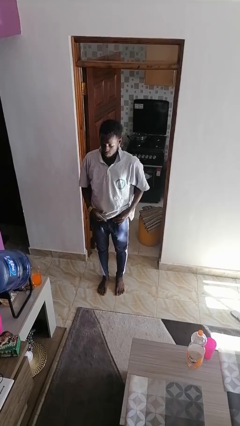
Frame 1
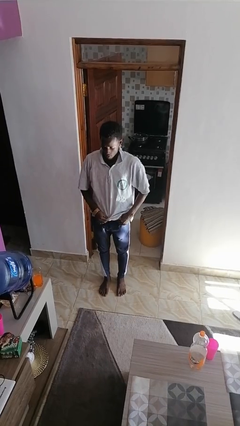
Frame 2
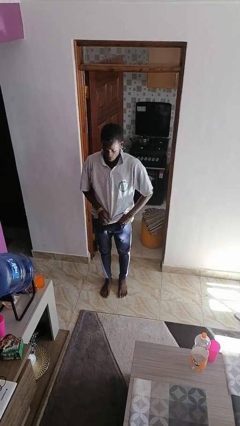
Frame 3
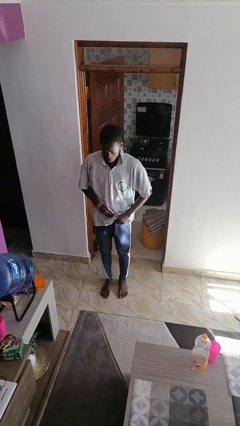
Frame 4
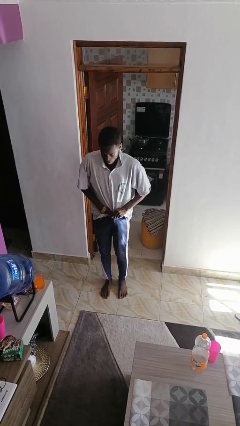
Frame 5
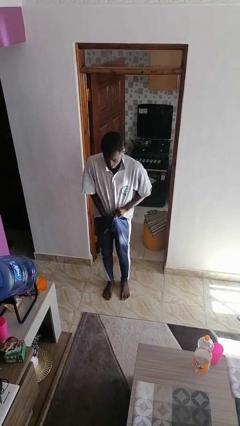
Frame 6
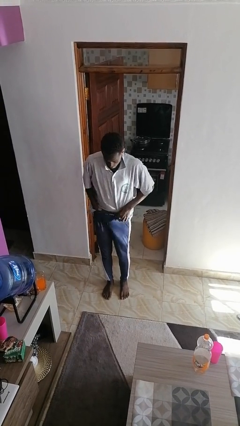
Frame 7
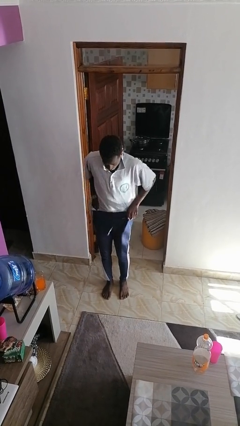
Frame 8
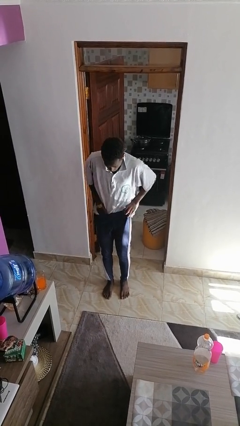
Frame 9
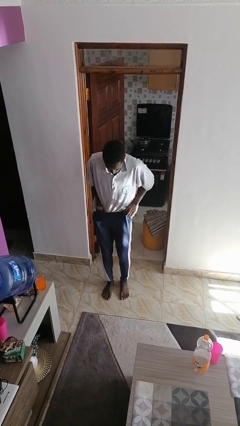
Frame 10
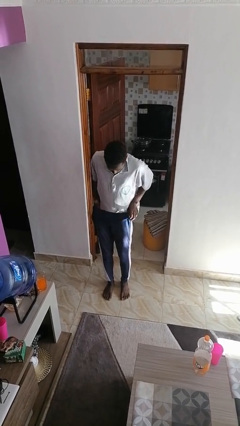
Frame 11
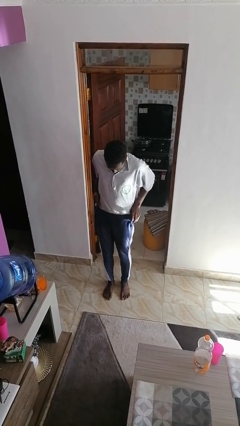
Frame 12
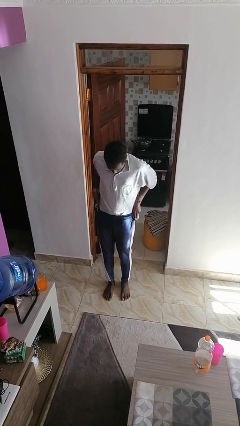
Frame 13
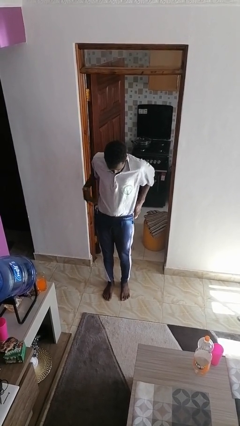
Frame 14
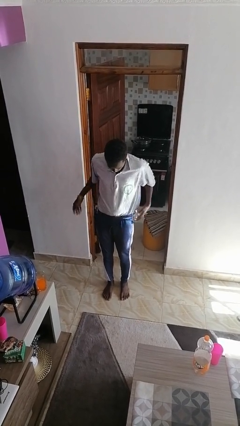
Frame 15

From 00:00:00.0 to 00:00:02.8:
person tucks in shirt

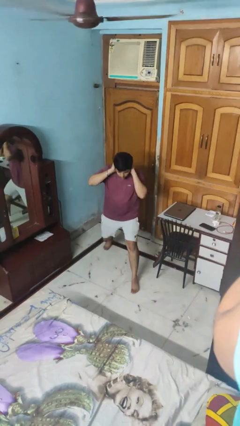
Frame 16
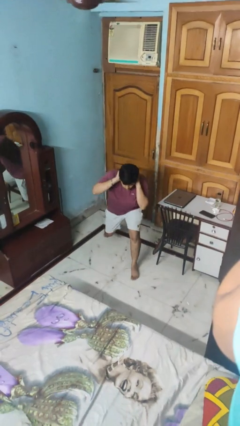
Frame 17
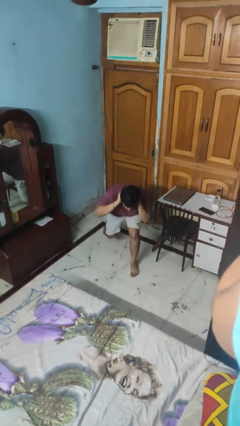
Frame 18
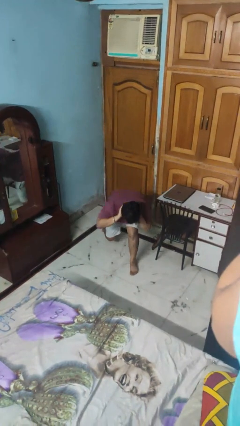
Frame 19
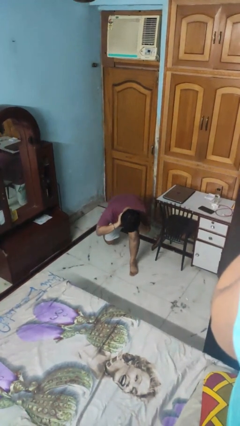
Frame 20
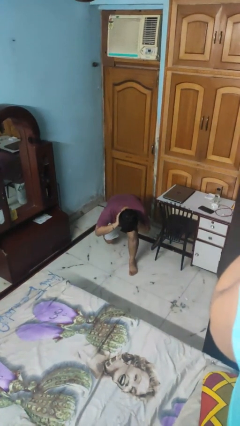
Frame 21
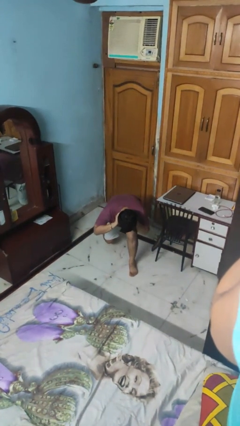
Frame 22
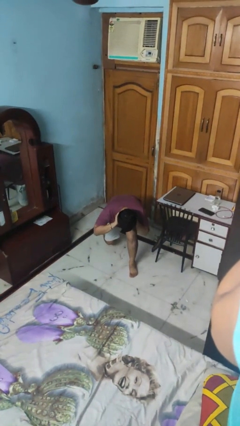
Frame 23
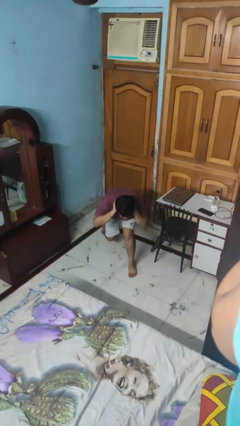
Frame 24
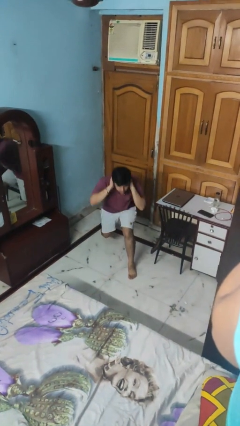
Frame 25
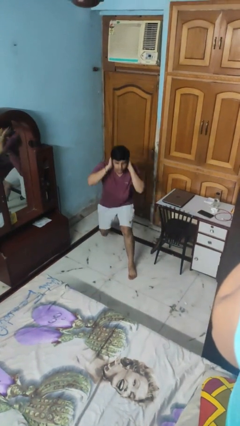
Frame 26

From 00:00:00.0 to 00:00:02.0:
person exercises with lunges

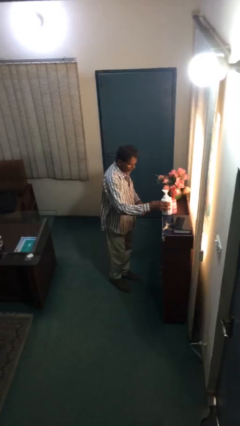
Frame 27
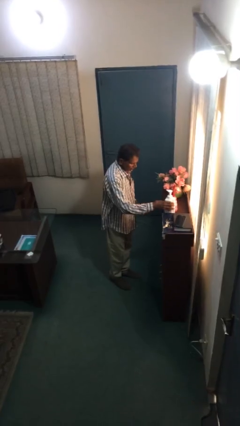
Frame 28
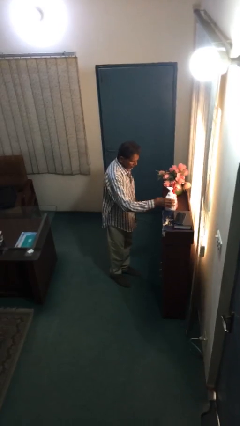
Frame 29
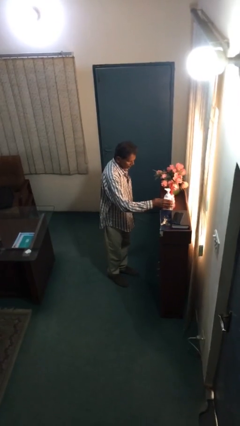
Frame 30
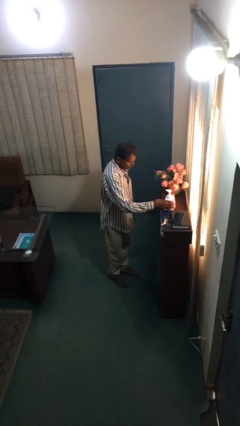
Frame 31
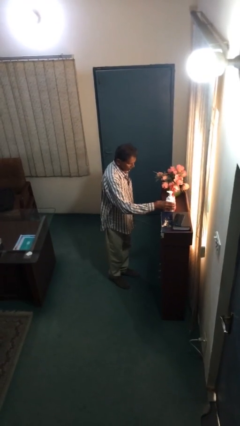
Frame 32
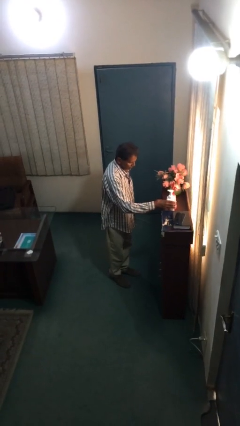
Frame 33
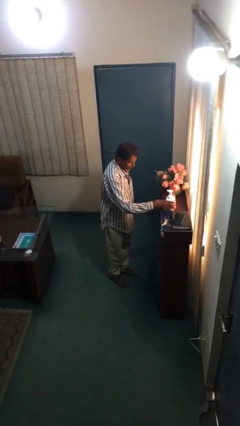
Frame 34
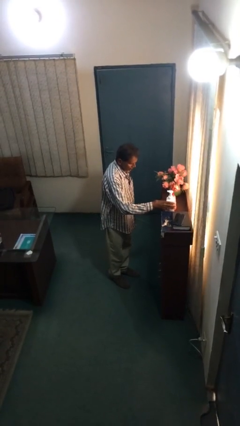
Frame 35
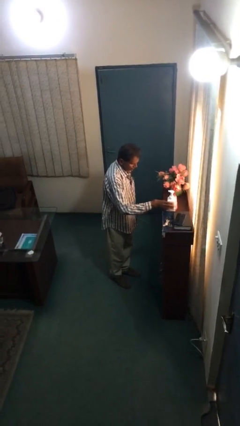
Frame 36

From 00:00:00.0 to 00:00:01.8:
person puts down object on shelf

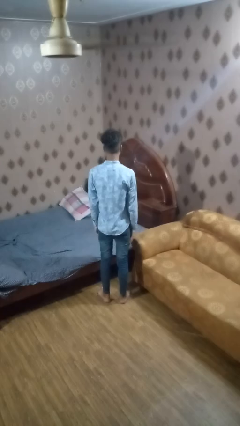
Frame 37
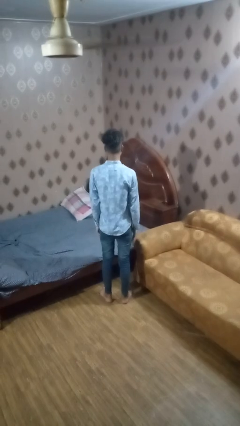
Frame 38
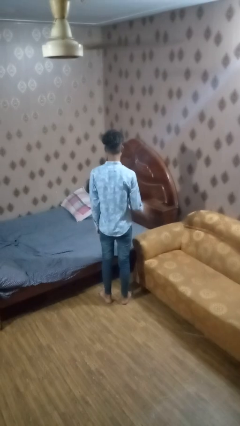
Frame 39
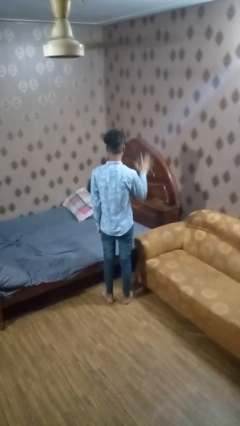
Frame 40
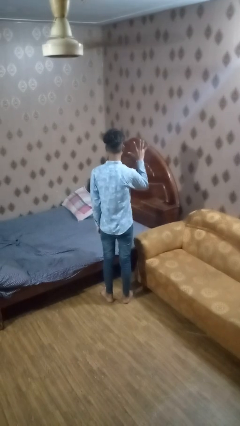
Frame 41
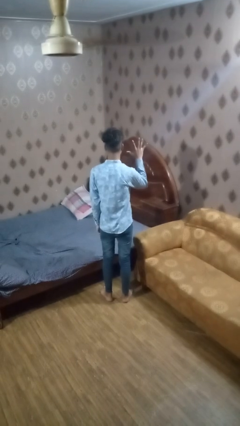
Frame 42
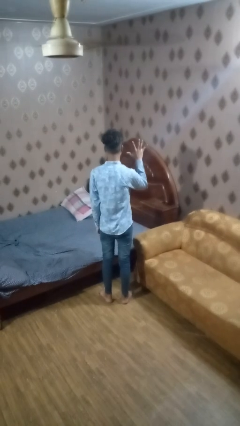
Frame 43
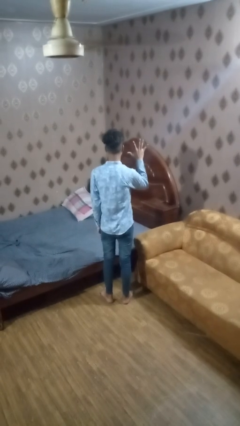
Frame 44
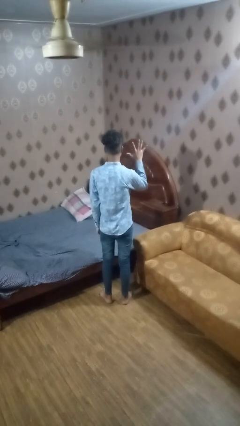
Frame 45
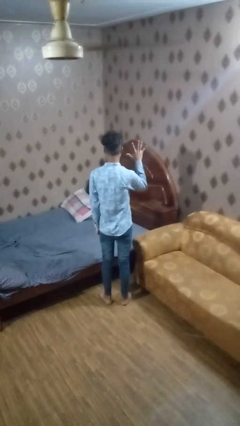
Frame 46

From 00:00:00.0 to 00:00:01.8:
person gestures number five

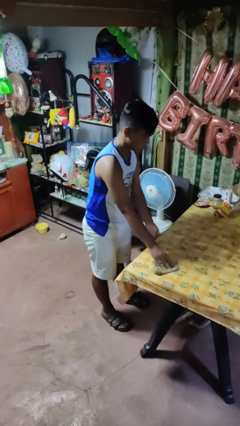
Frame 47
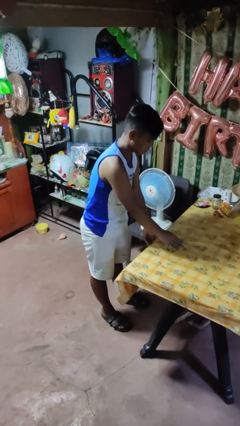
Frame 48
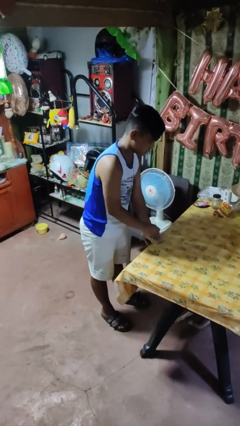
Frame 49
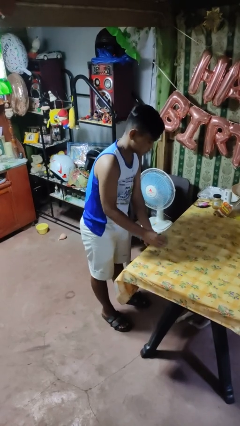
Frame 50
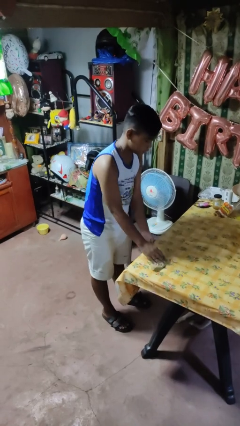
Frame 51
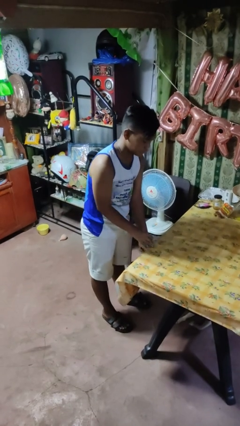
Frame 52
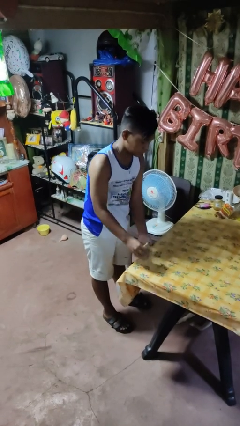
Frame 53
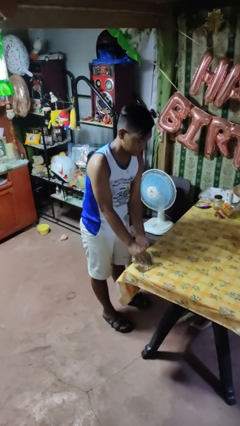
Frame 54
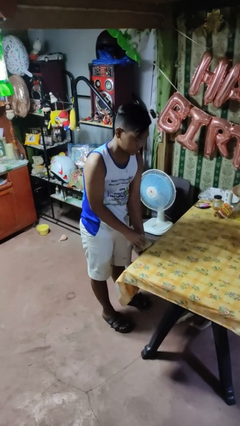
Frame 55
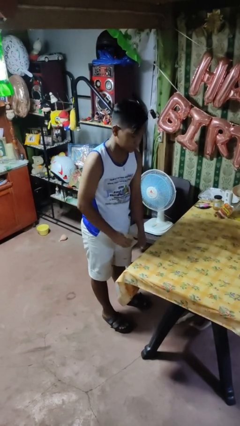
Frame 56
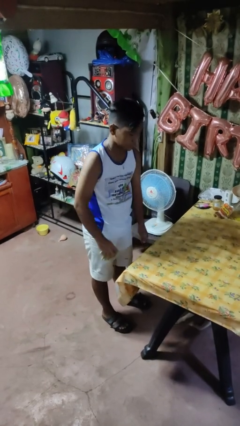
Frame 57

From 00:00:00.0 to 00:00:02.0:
person cleans table with rag

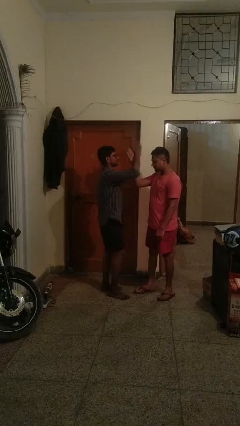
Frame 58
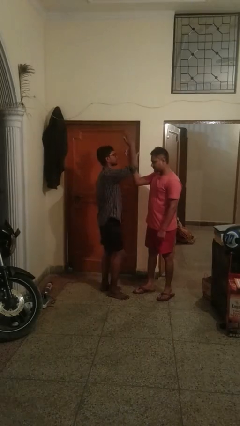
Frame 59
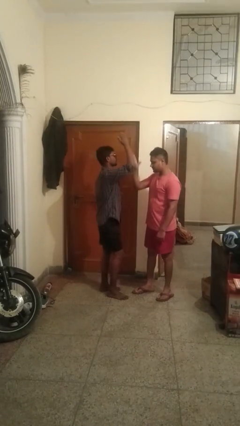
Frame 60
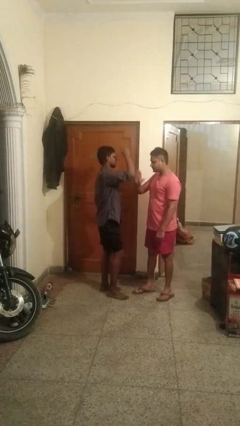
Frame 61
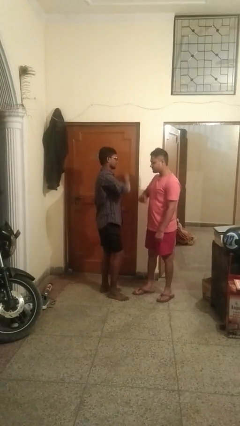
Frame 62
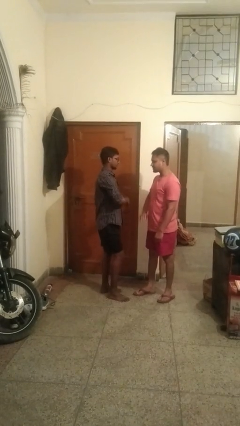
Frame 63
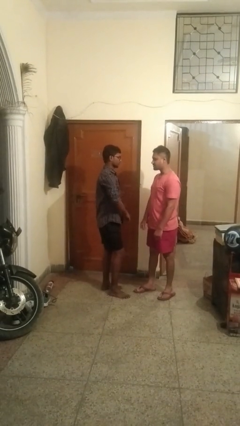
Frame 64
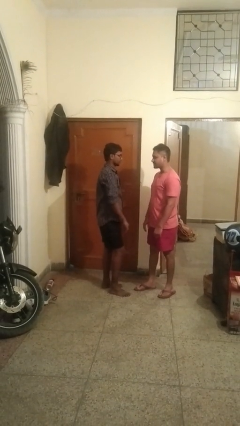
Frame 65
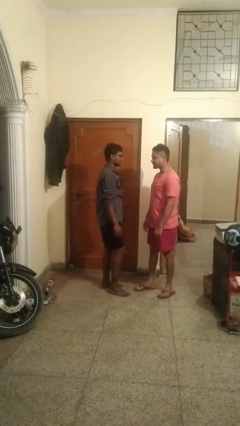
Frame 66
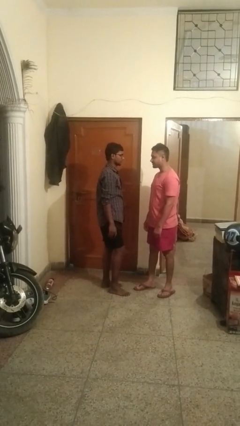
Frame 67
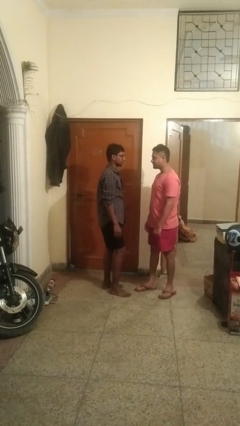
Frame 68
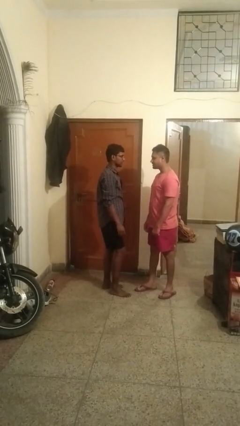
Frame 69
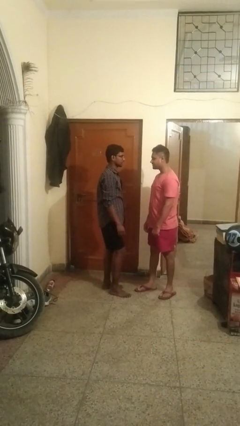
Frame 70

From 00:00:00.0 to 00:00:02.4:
person highfives hand

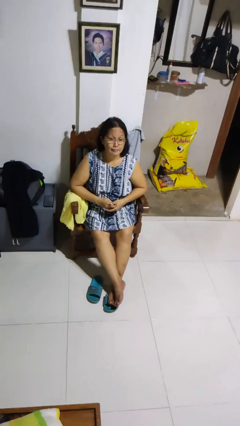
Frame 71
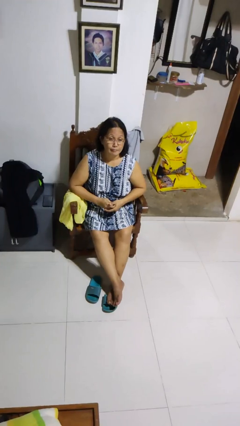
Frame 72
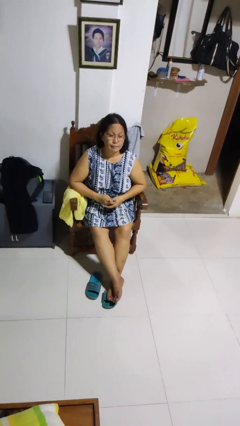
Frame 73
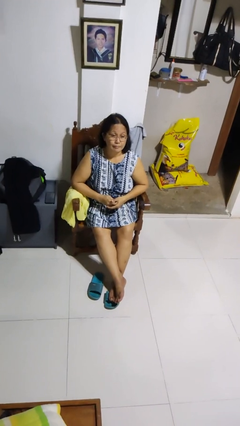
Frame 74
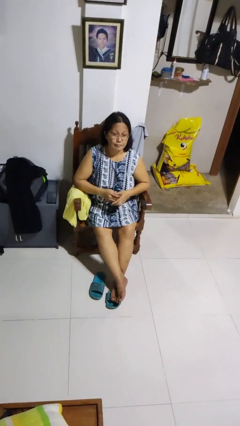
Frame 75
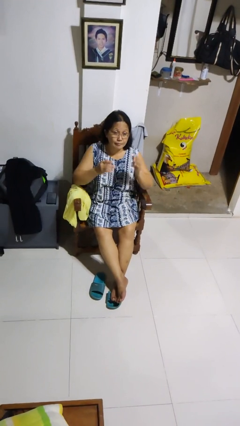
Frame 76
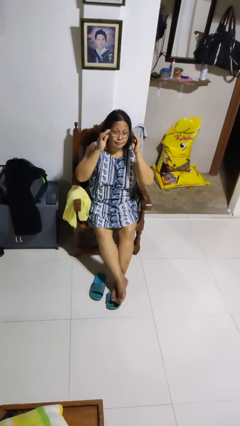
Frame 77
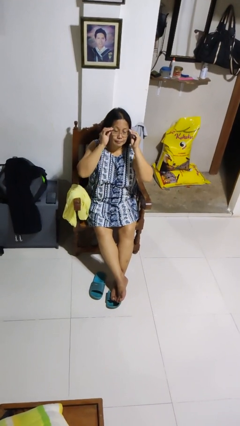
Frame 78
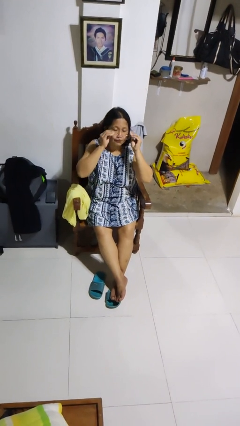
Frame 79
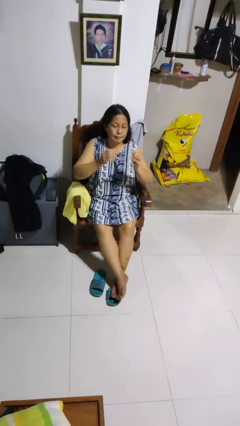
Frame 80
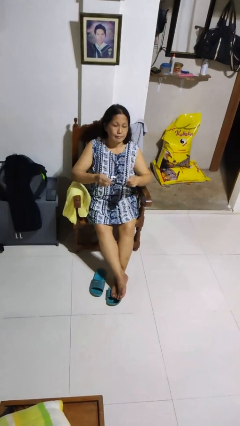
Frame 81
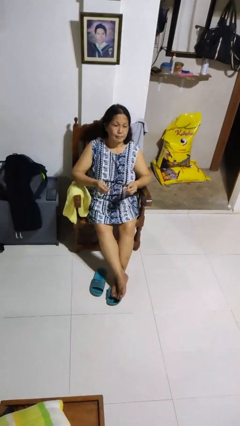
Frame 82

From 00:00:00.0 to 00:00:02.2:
person takes off glasses

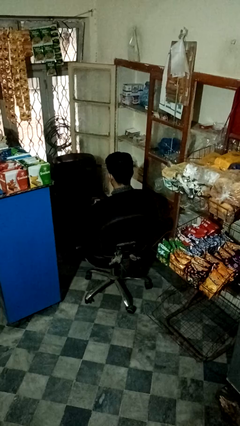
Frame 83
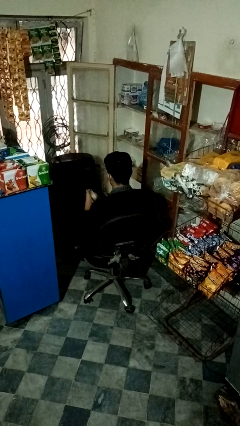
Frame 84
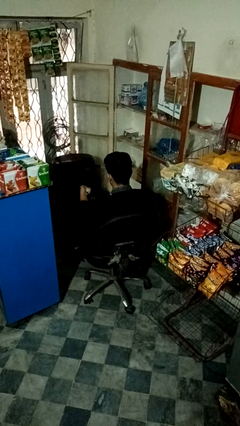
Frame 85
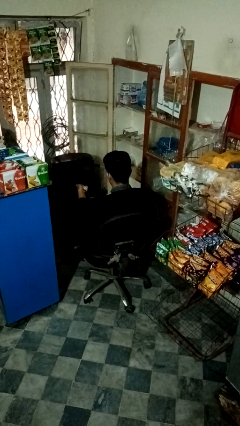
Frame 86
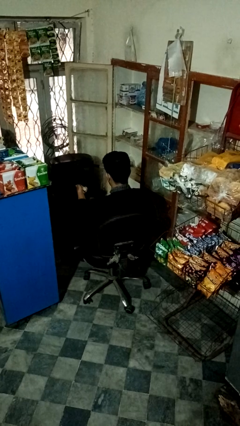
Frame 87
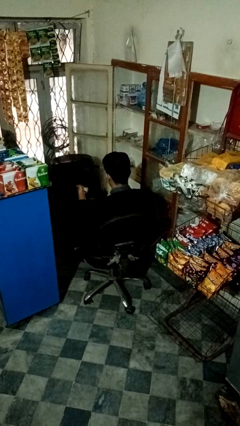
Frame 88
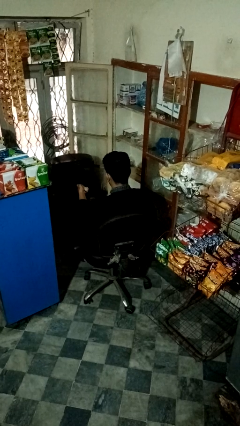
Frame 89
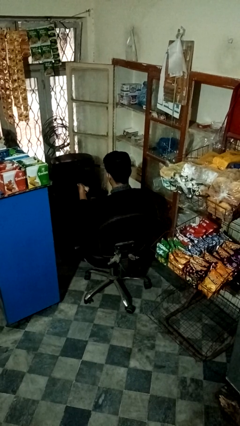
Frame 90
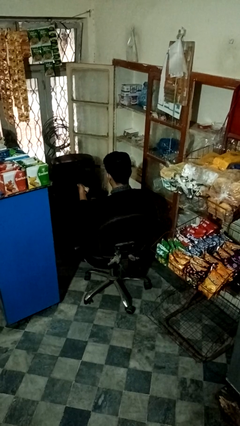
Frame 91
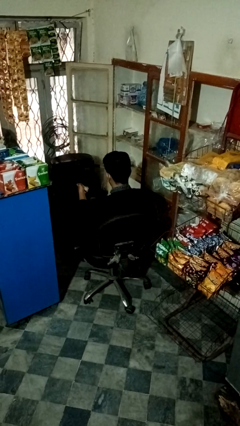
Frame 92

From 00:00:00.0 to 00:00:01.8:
person uses television remote

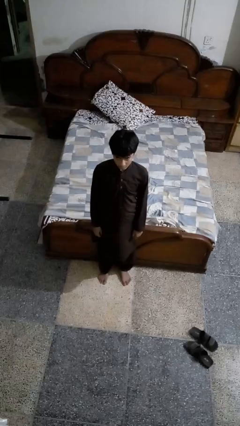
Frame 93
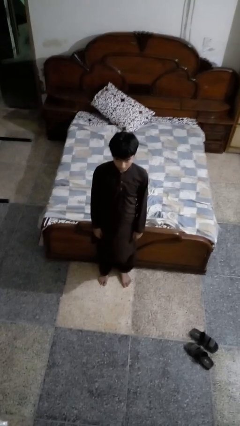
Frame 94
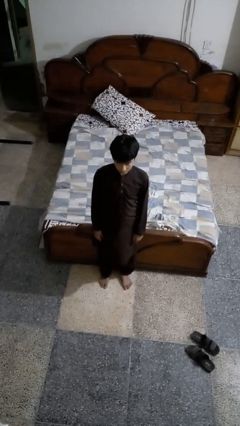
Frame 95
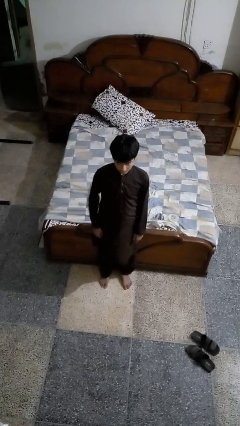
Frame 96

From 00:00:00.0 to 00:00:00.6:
person takes phone from pocket
